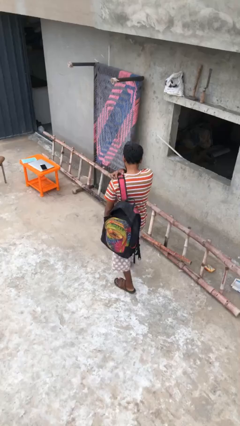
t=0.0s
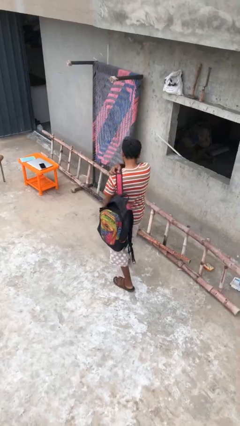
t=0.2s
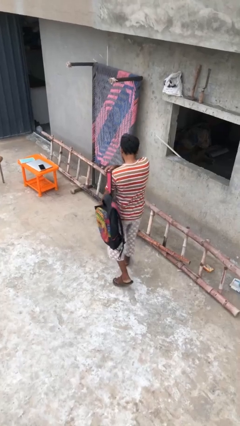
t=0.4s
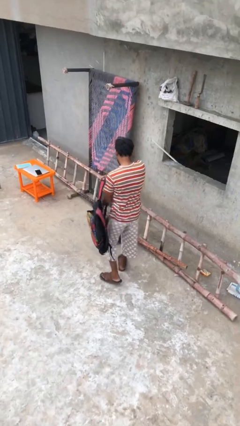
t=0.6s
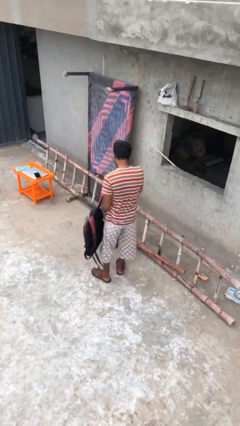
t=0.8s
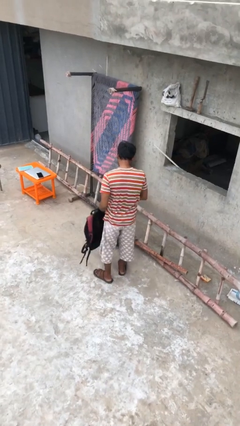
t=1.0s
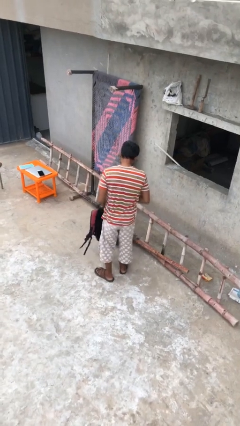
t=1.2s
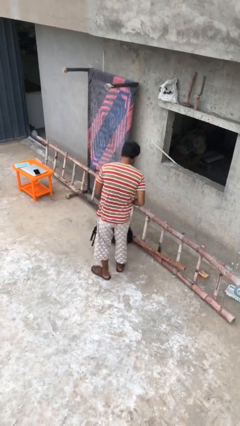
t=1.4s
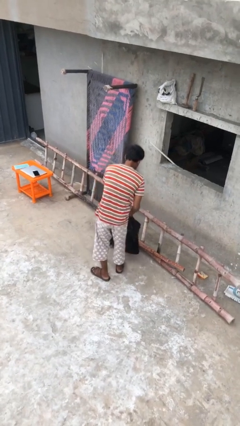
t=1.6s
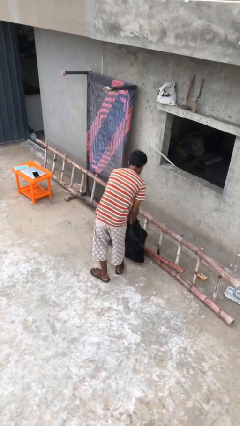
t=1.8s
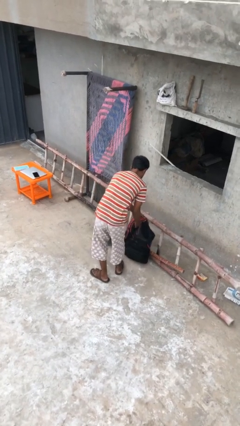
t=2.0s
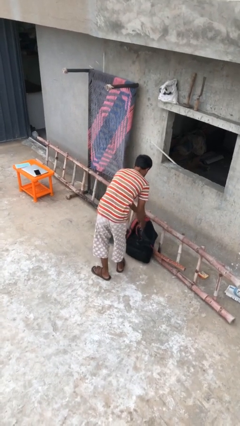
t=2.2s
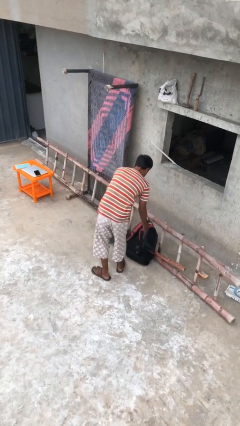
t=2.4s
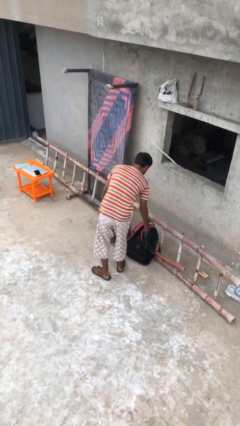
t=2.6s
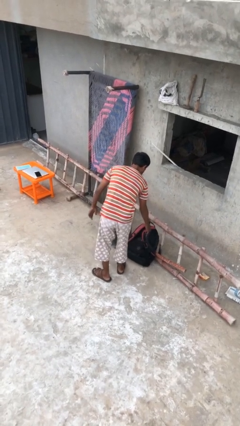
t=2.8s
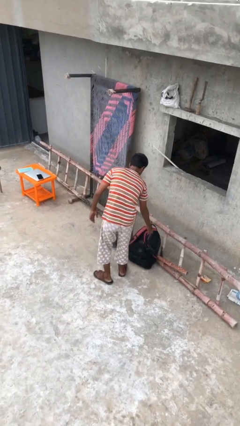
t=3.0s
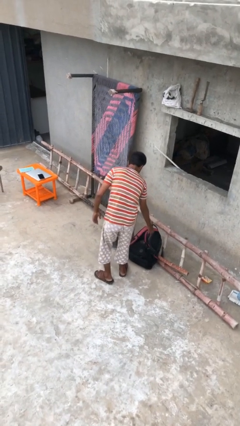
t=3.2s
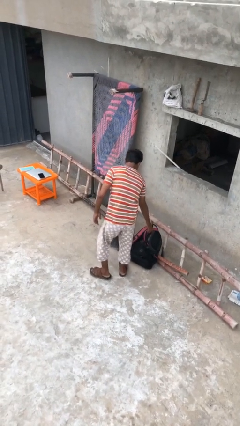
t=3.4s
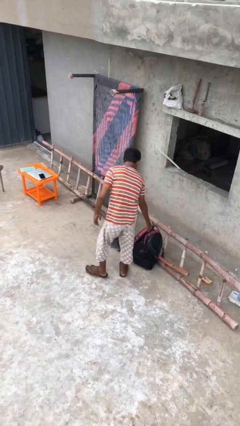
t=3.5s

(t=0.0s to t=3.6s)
person puts down object on floor

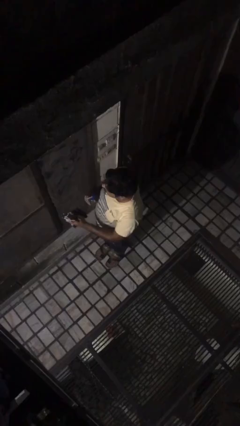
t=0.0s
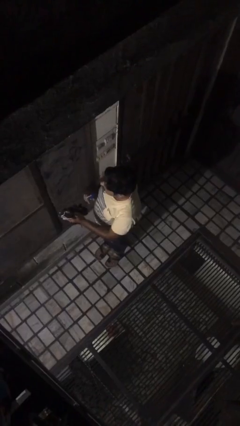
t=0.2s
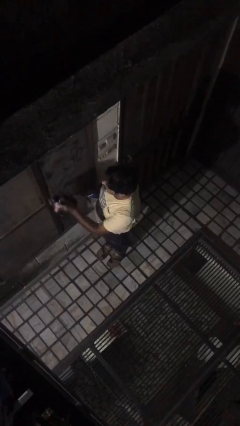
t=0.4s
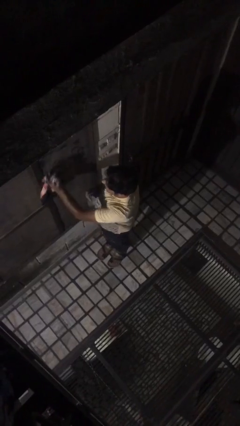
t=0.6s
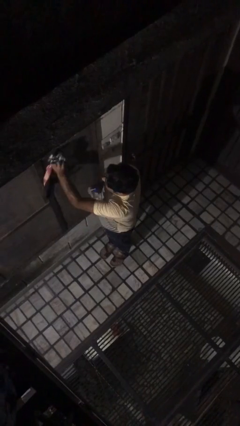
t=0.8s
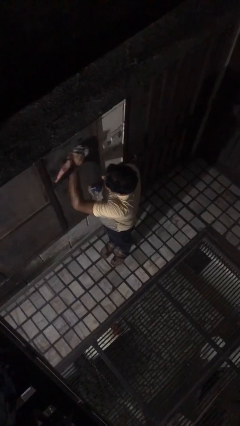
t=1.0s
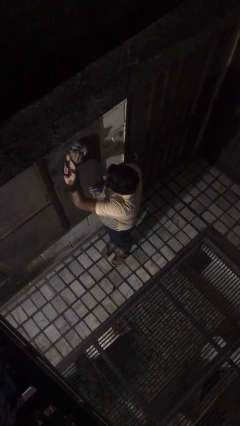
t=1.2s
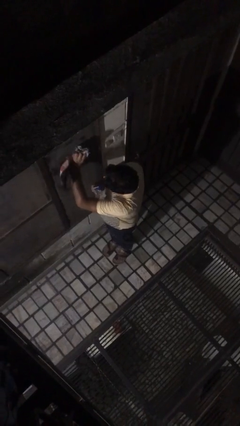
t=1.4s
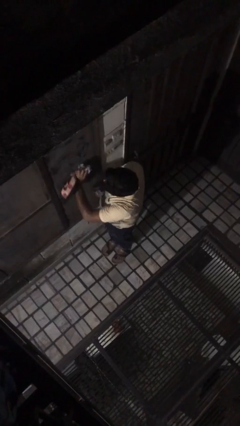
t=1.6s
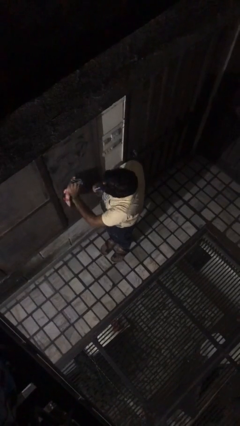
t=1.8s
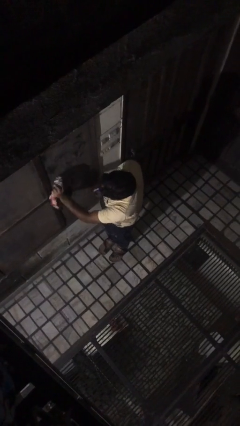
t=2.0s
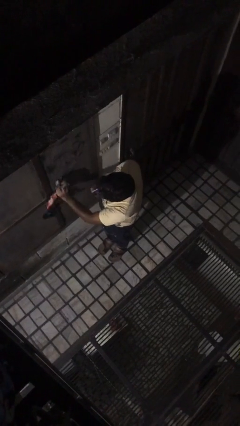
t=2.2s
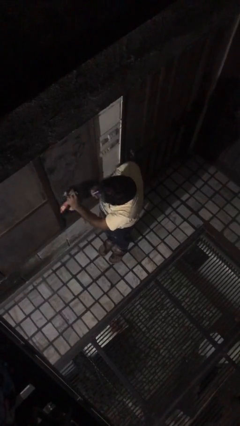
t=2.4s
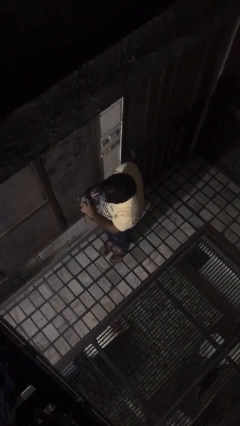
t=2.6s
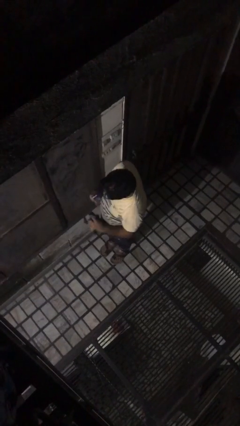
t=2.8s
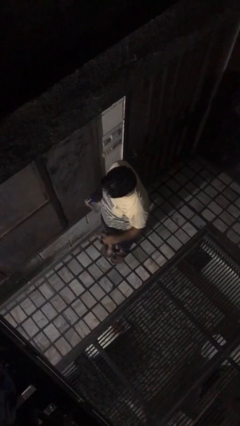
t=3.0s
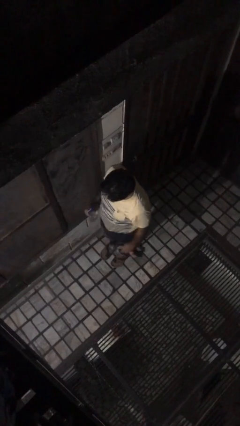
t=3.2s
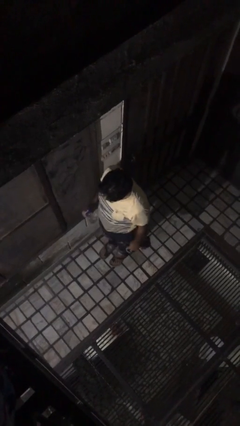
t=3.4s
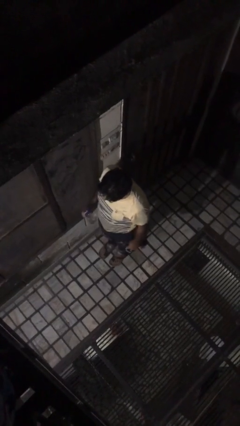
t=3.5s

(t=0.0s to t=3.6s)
person washes window

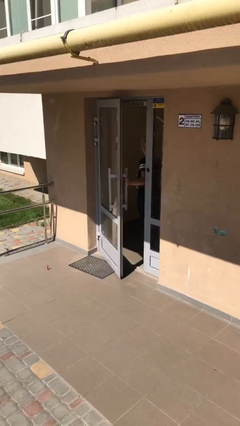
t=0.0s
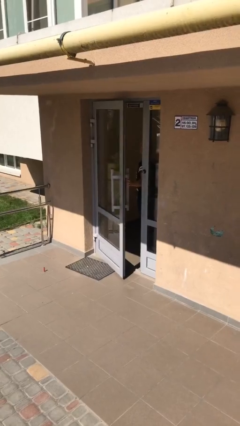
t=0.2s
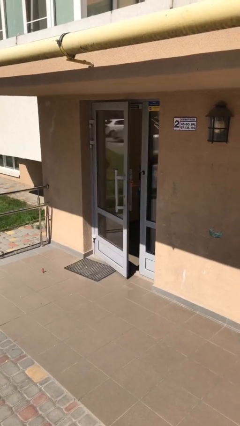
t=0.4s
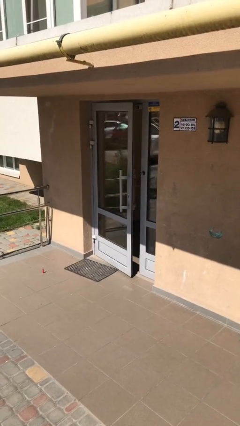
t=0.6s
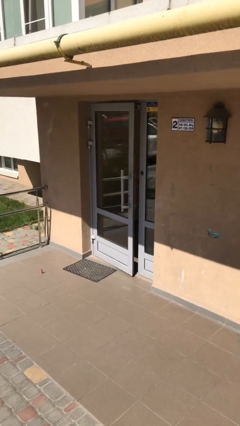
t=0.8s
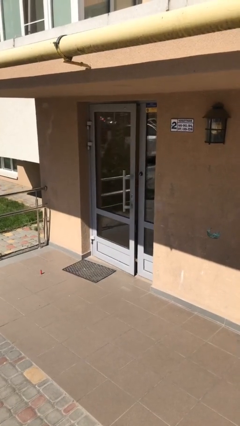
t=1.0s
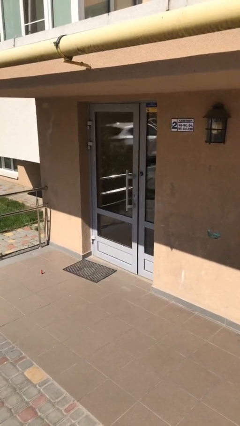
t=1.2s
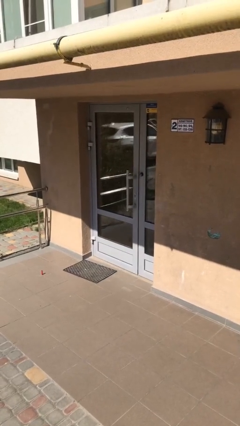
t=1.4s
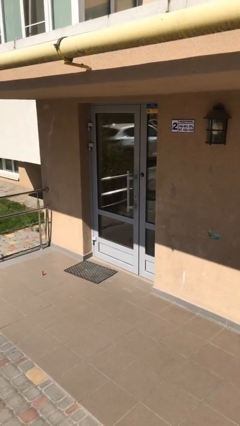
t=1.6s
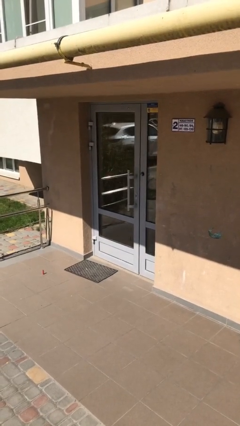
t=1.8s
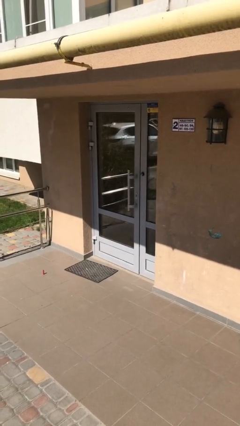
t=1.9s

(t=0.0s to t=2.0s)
person closes facility door

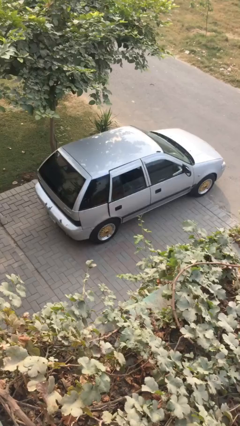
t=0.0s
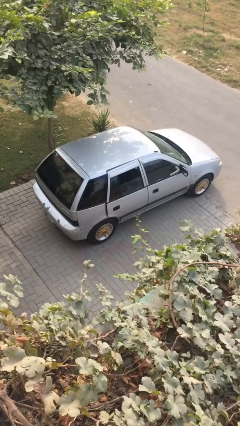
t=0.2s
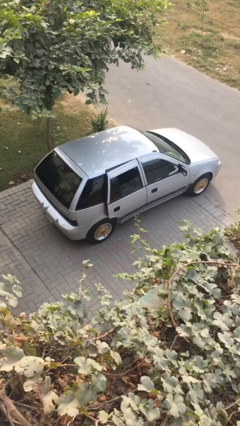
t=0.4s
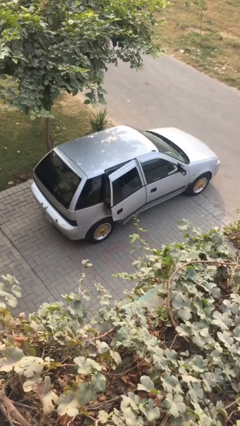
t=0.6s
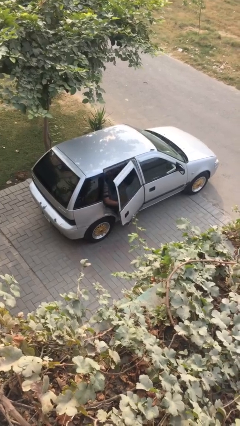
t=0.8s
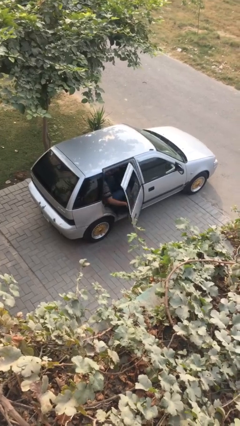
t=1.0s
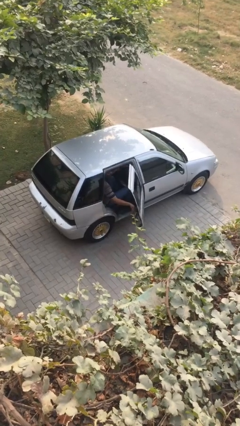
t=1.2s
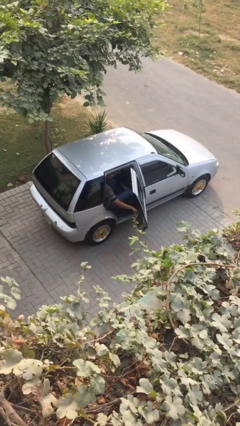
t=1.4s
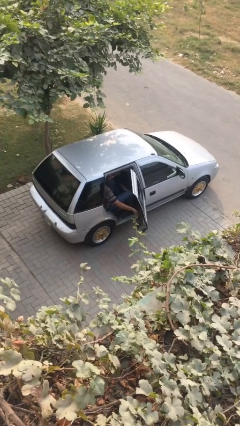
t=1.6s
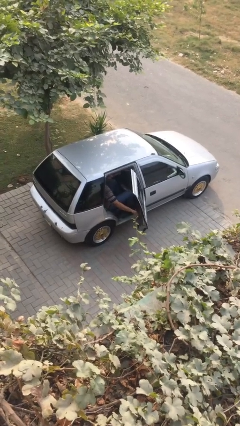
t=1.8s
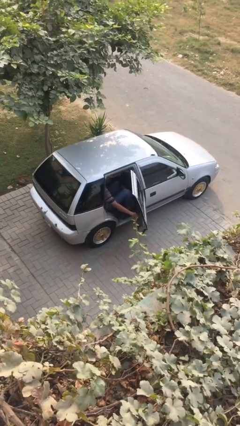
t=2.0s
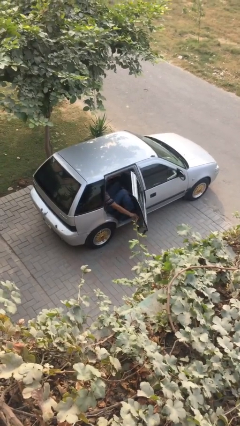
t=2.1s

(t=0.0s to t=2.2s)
person opens car door

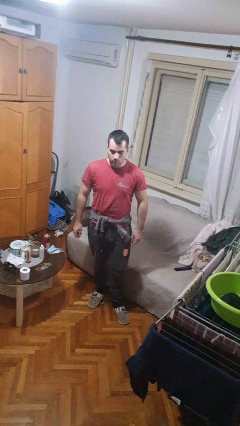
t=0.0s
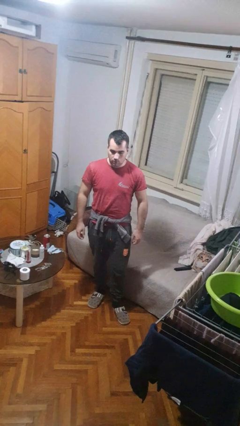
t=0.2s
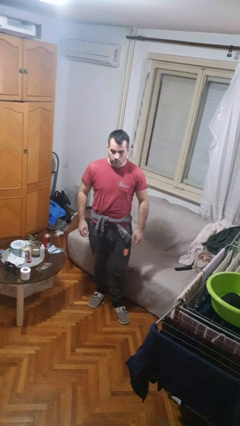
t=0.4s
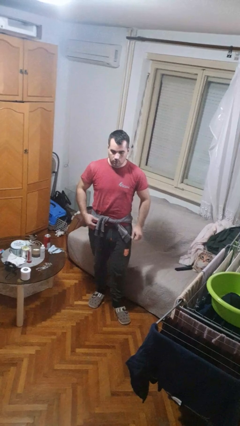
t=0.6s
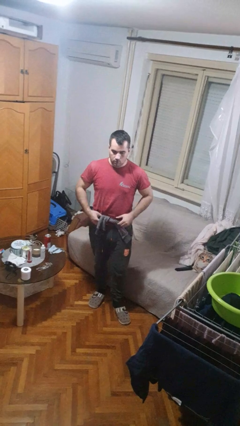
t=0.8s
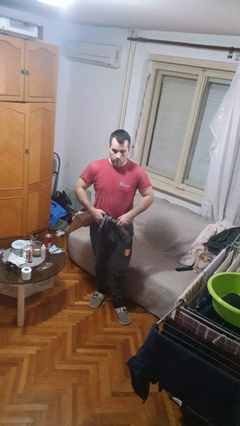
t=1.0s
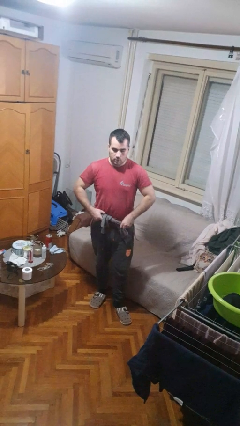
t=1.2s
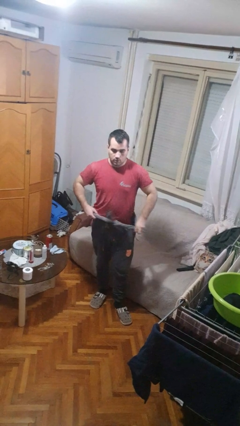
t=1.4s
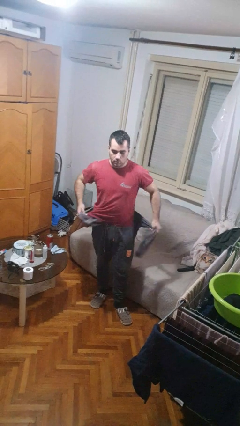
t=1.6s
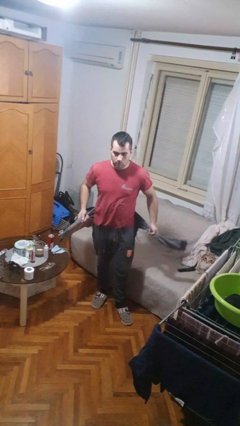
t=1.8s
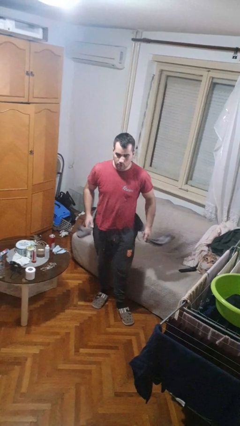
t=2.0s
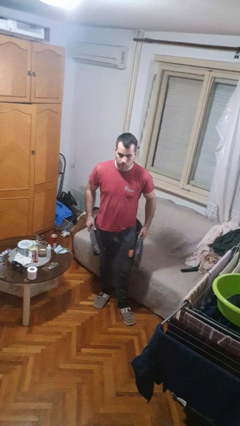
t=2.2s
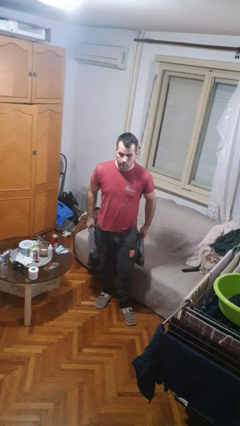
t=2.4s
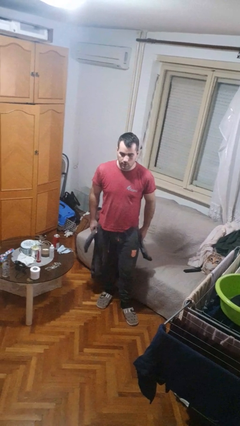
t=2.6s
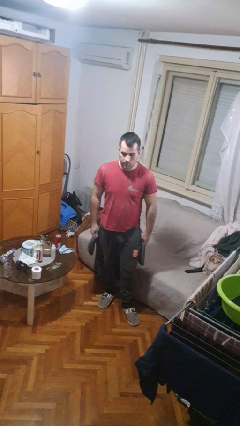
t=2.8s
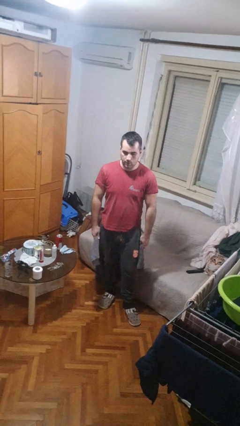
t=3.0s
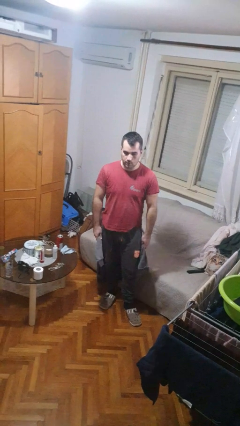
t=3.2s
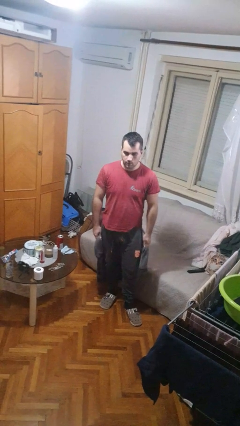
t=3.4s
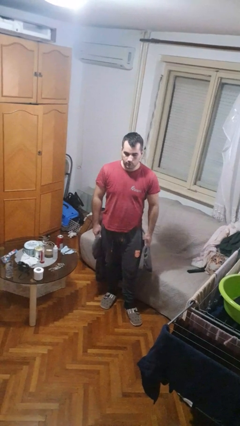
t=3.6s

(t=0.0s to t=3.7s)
person unties jacket around waist

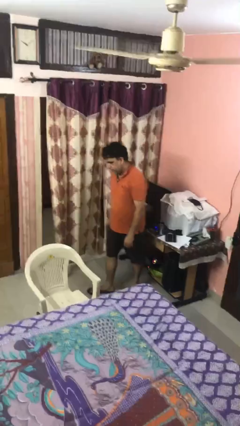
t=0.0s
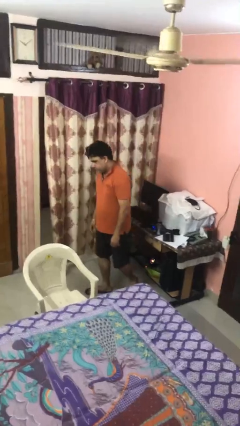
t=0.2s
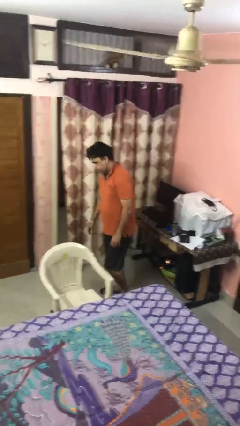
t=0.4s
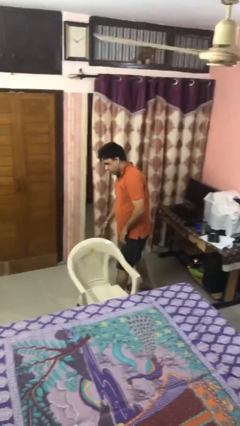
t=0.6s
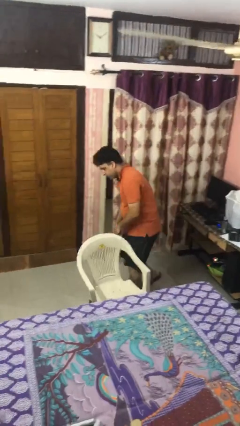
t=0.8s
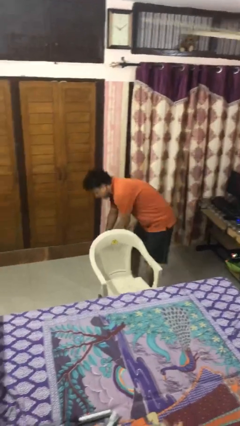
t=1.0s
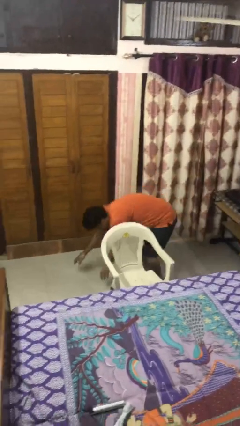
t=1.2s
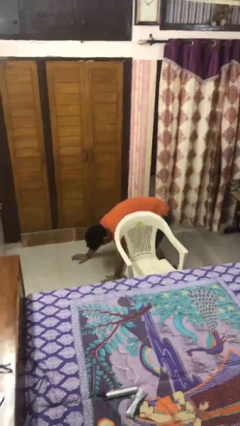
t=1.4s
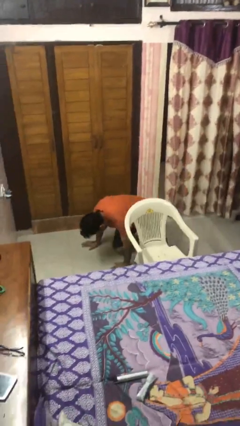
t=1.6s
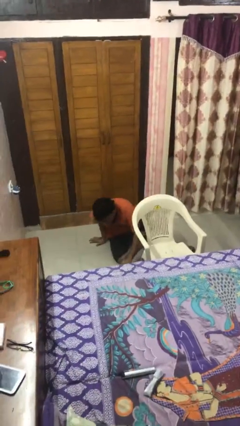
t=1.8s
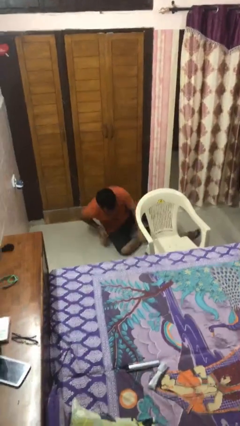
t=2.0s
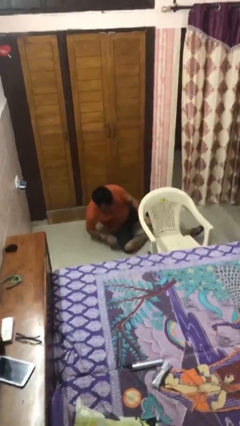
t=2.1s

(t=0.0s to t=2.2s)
person trips on object on floor

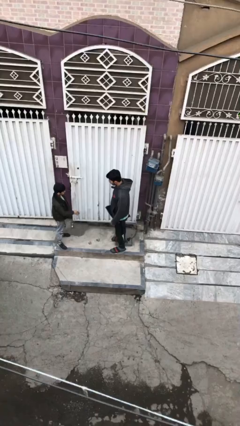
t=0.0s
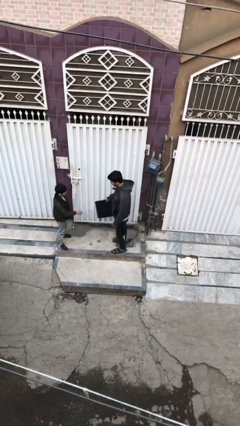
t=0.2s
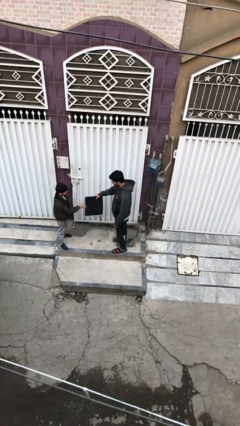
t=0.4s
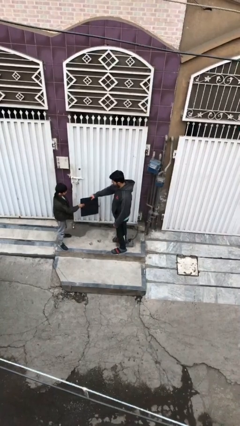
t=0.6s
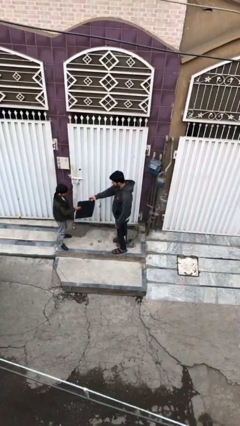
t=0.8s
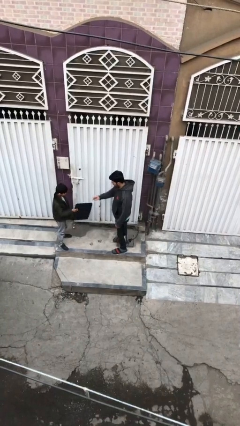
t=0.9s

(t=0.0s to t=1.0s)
person transfers object to person
